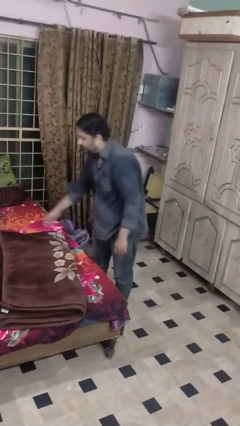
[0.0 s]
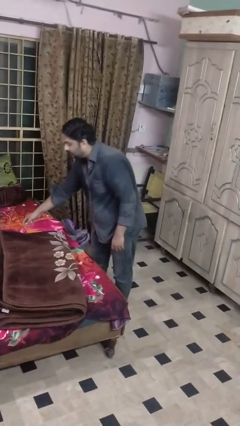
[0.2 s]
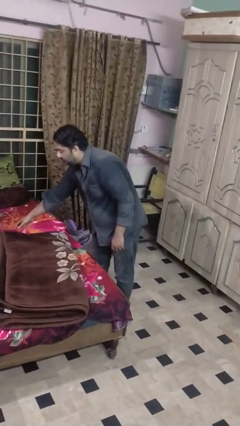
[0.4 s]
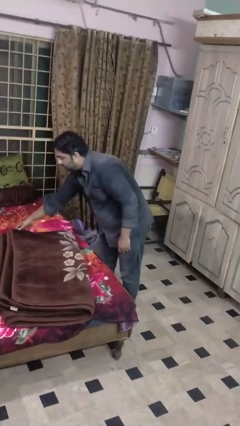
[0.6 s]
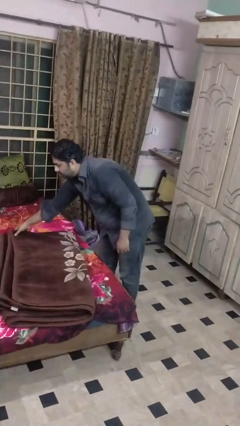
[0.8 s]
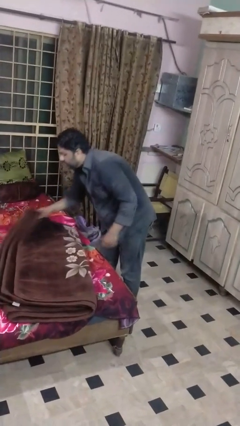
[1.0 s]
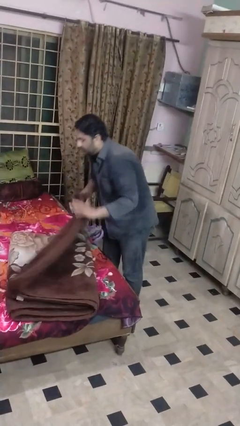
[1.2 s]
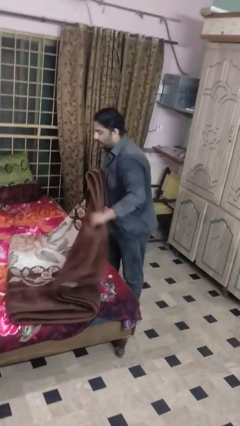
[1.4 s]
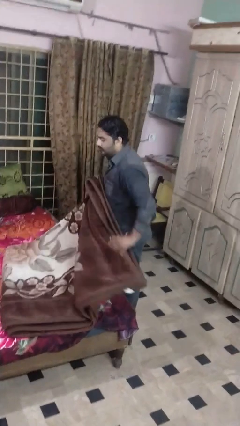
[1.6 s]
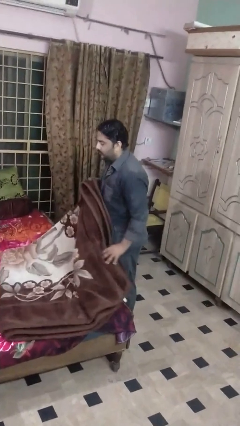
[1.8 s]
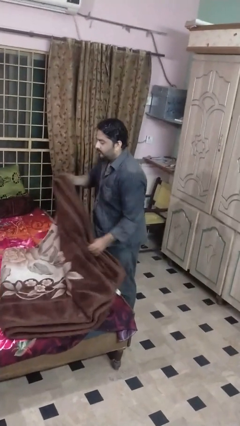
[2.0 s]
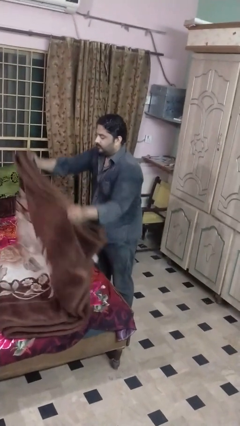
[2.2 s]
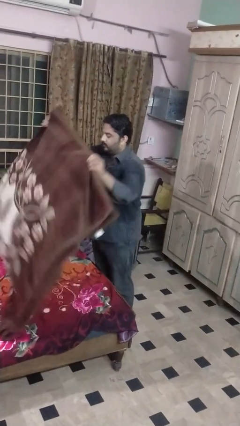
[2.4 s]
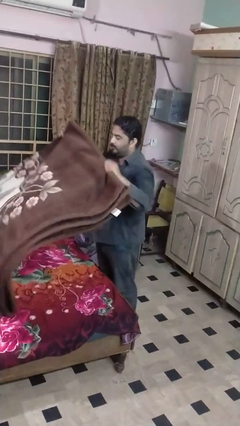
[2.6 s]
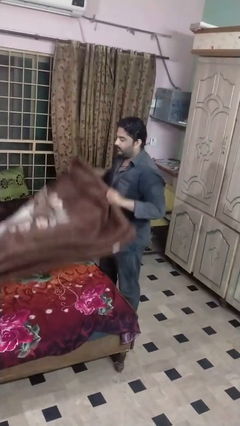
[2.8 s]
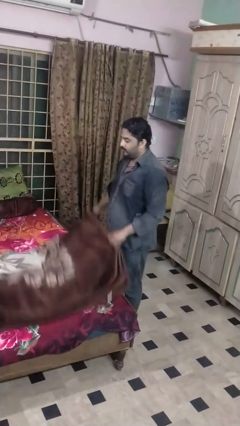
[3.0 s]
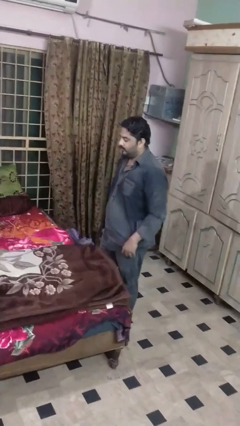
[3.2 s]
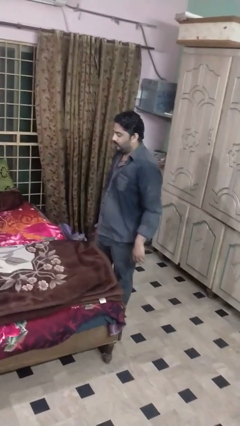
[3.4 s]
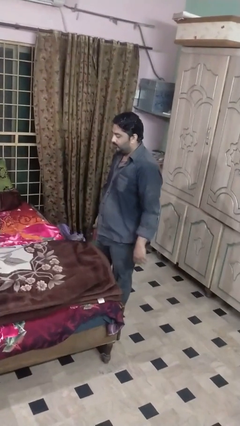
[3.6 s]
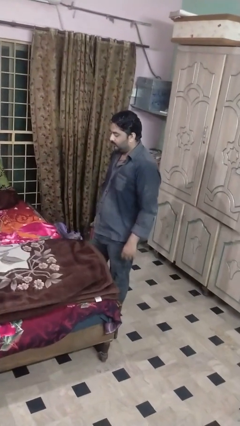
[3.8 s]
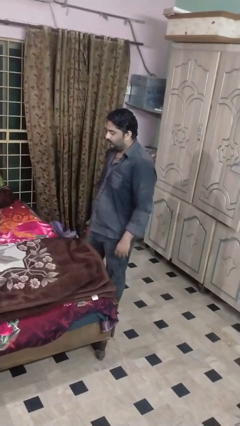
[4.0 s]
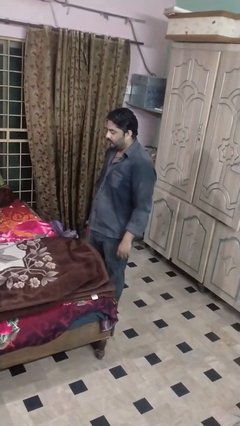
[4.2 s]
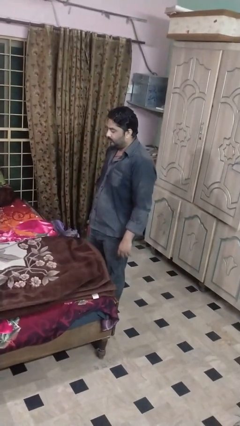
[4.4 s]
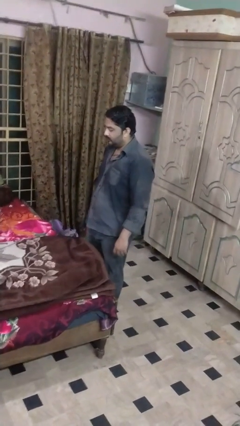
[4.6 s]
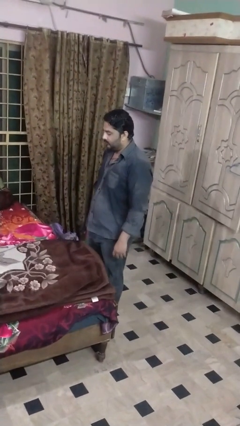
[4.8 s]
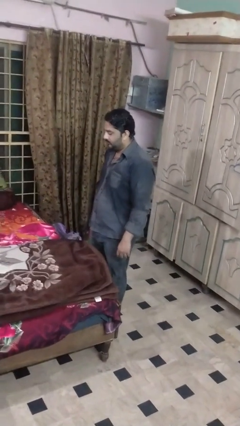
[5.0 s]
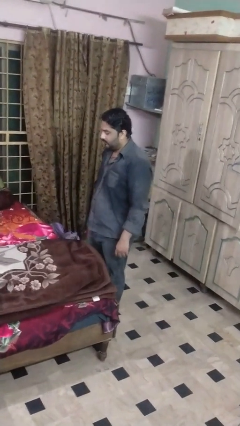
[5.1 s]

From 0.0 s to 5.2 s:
person unfolds blanket

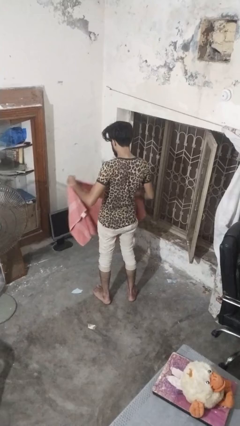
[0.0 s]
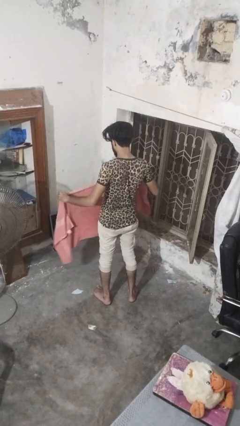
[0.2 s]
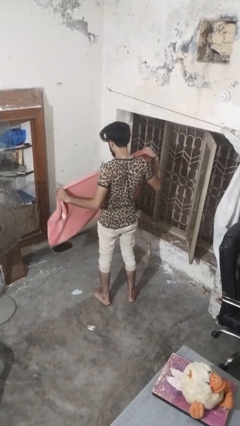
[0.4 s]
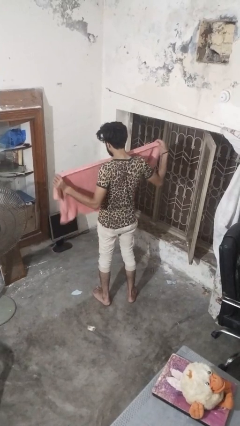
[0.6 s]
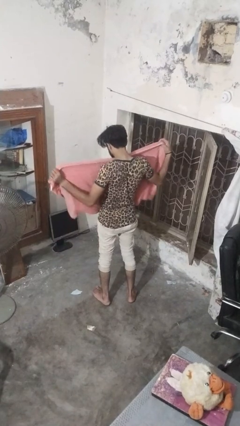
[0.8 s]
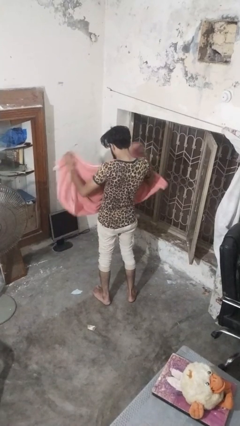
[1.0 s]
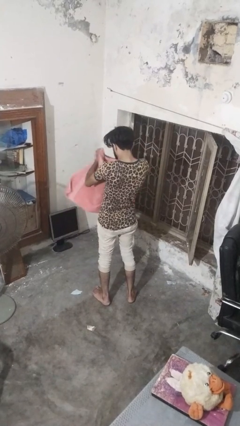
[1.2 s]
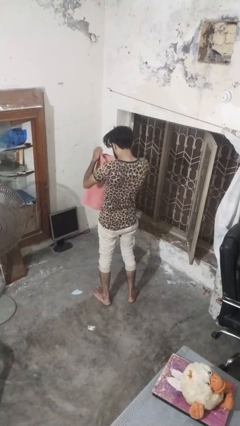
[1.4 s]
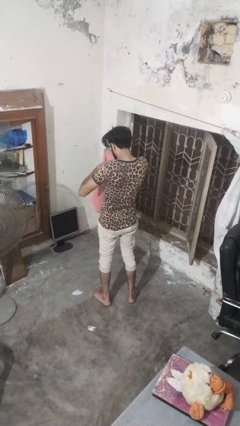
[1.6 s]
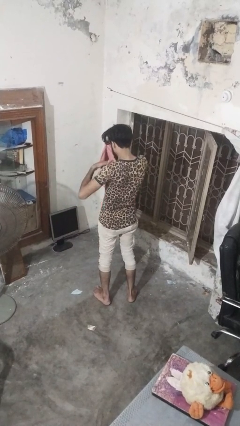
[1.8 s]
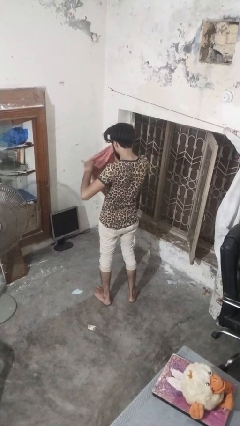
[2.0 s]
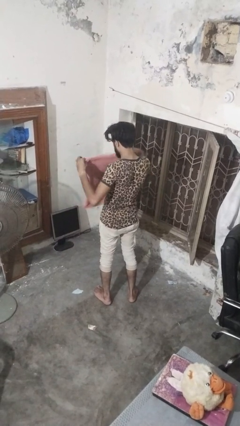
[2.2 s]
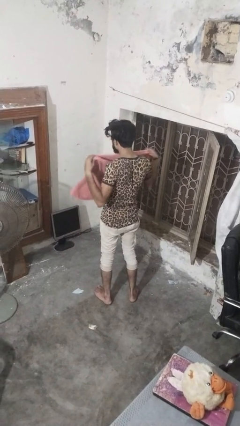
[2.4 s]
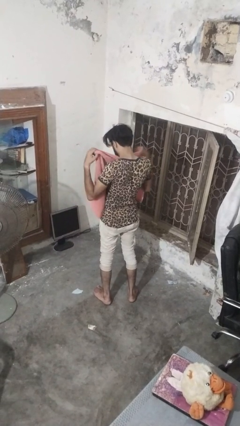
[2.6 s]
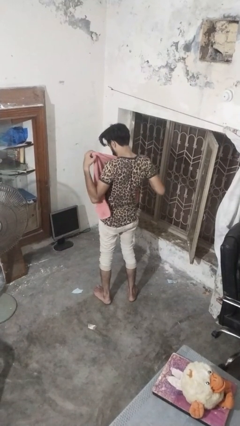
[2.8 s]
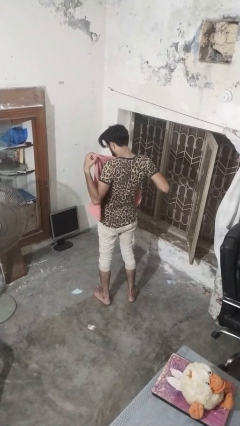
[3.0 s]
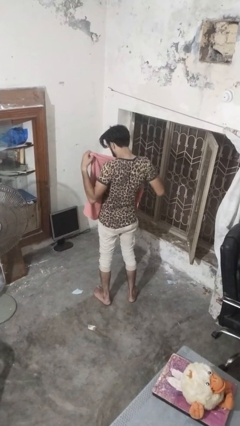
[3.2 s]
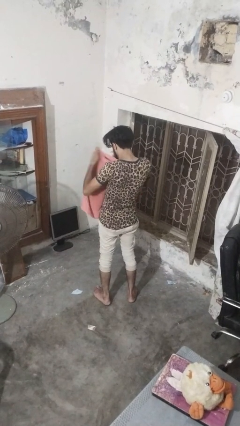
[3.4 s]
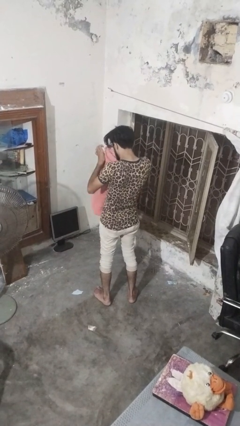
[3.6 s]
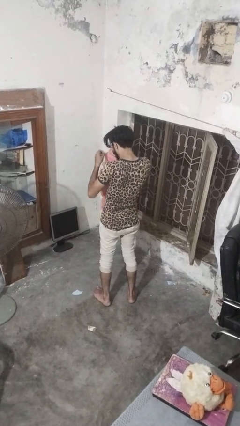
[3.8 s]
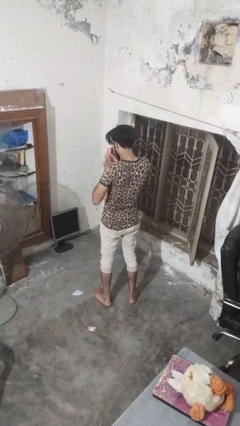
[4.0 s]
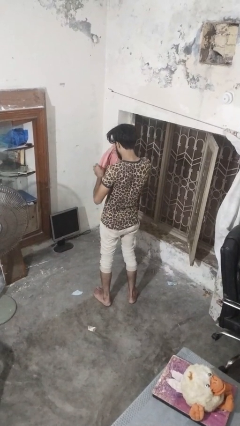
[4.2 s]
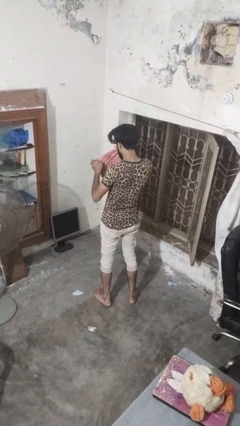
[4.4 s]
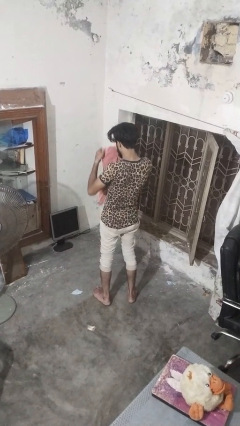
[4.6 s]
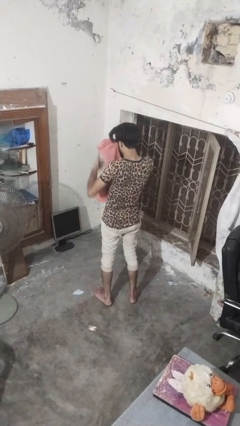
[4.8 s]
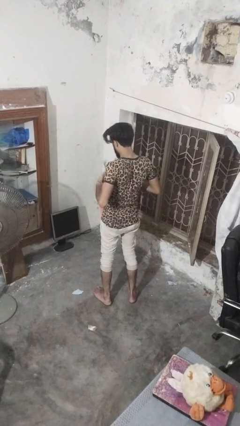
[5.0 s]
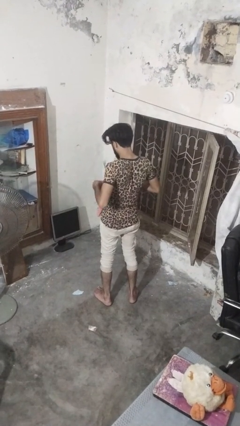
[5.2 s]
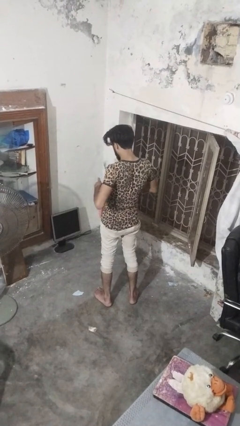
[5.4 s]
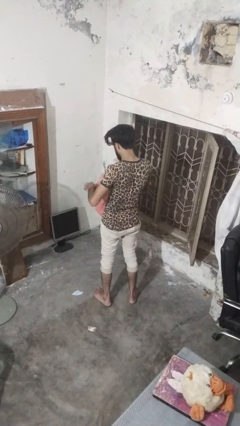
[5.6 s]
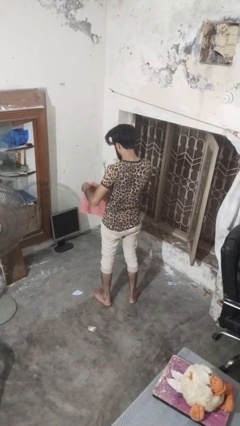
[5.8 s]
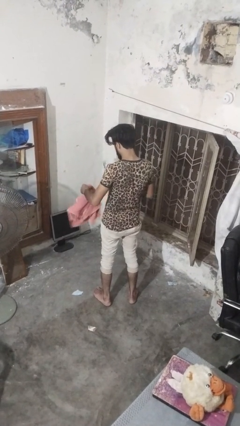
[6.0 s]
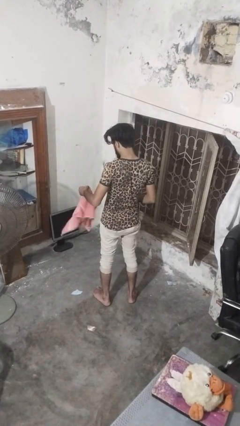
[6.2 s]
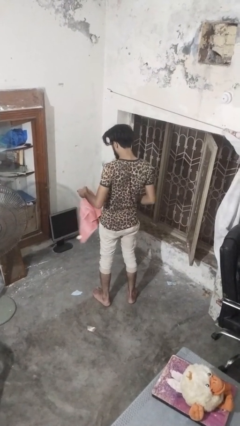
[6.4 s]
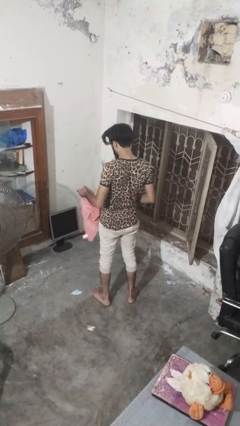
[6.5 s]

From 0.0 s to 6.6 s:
person folds towel

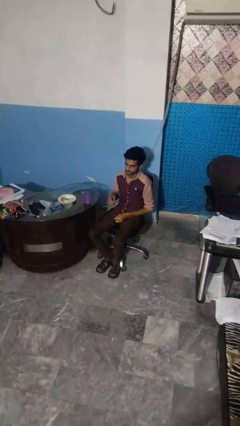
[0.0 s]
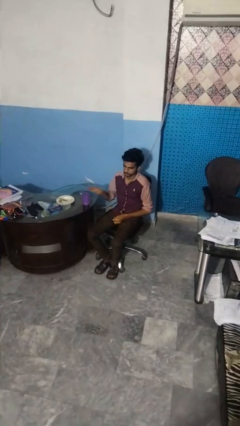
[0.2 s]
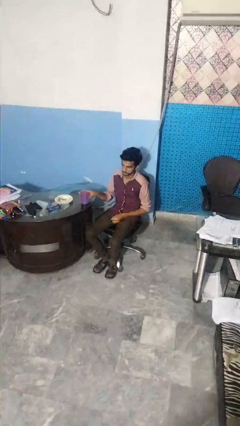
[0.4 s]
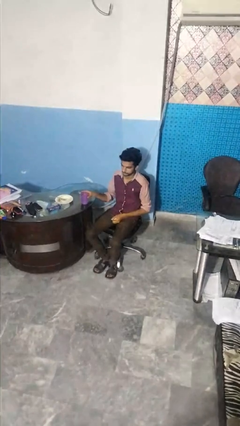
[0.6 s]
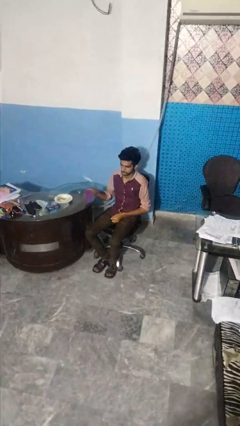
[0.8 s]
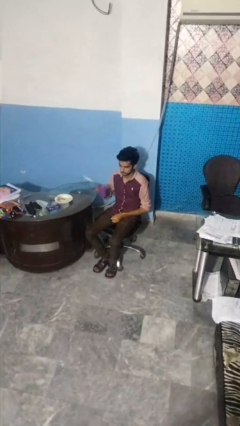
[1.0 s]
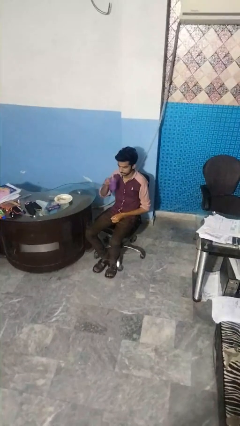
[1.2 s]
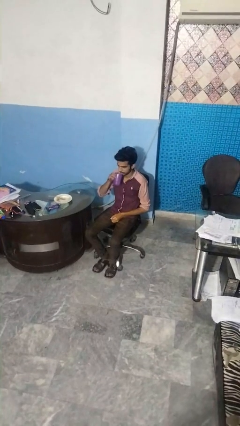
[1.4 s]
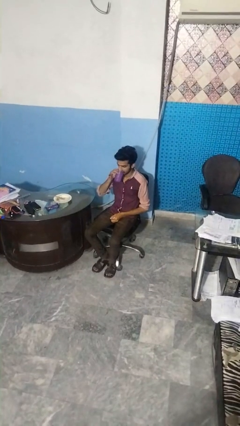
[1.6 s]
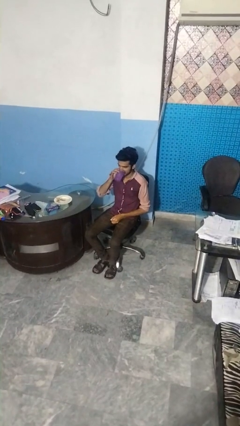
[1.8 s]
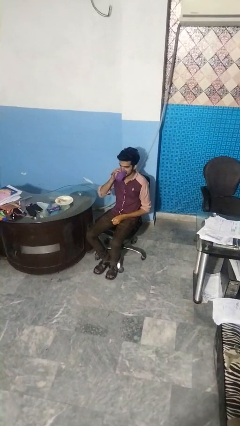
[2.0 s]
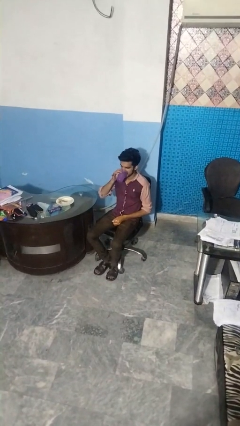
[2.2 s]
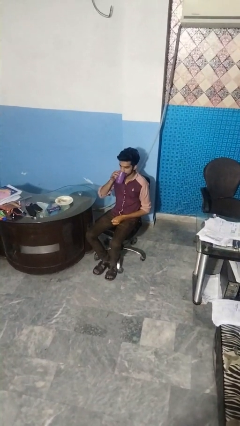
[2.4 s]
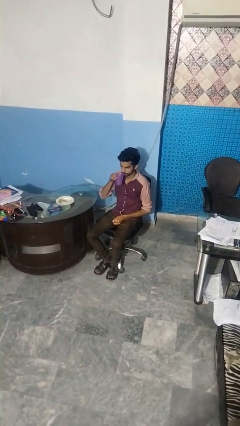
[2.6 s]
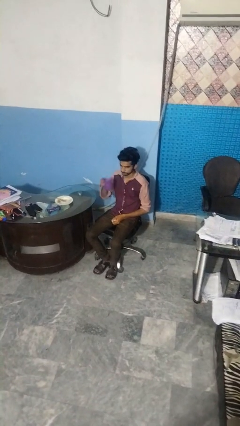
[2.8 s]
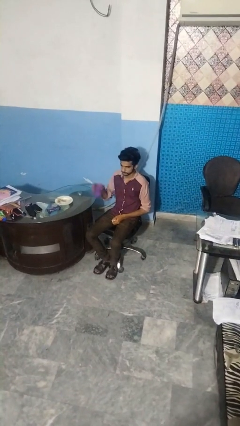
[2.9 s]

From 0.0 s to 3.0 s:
person drinks from cup

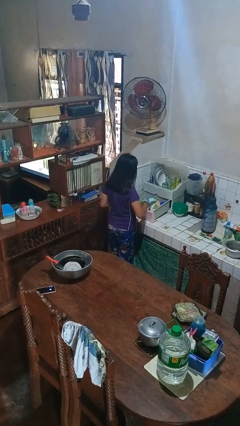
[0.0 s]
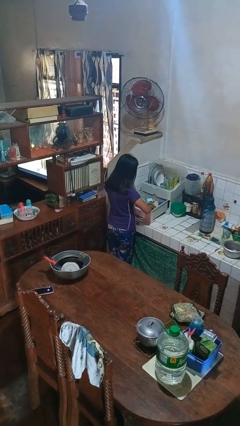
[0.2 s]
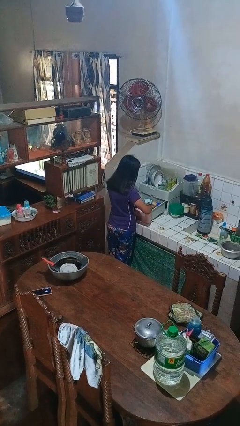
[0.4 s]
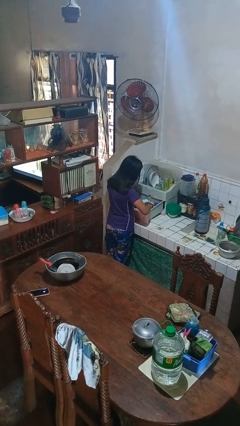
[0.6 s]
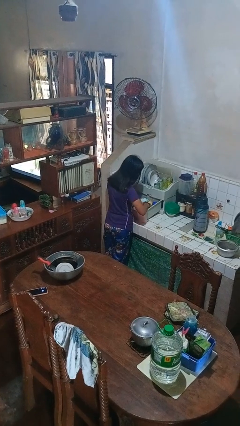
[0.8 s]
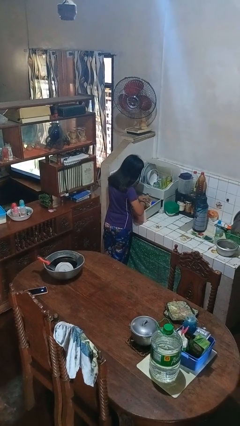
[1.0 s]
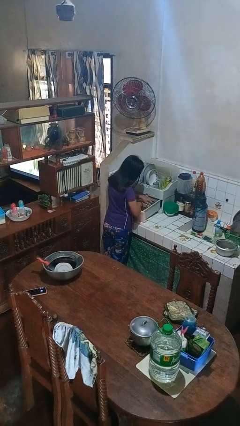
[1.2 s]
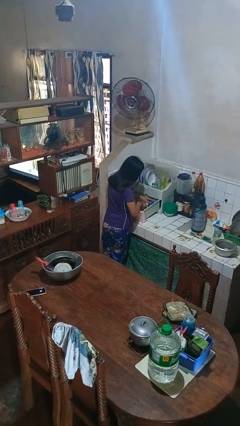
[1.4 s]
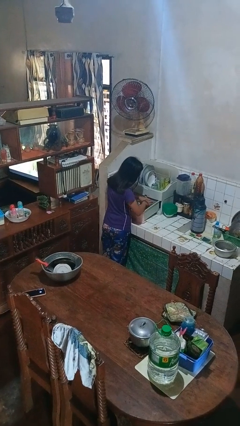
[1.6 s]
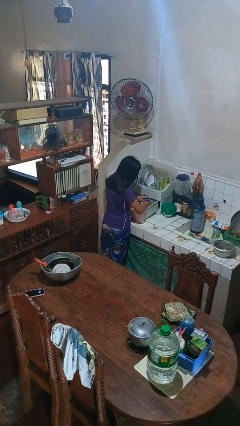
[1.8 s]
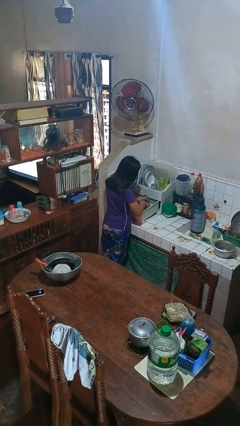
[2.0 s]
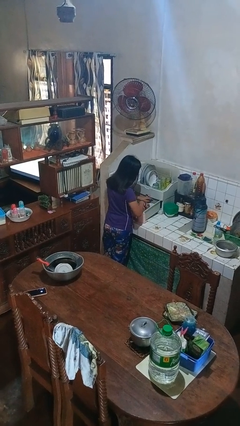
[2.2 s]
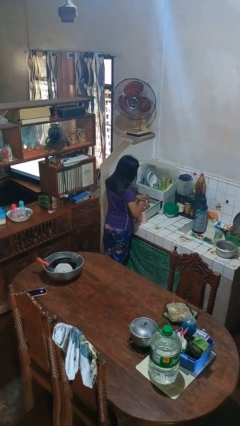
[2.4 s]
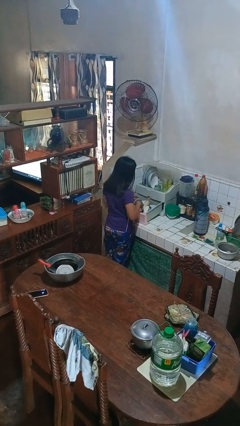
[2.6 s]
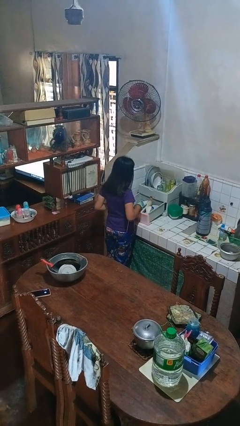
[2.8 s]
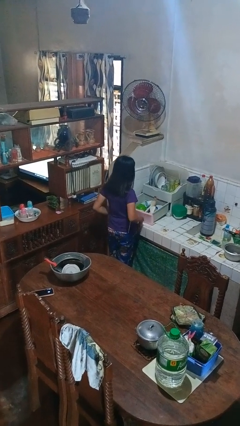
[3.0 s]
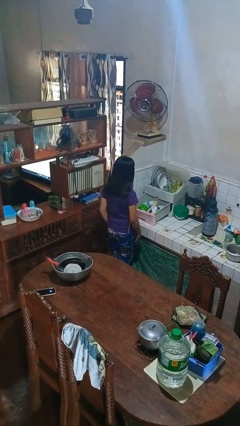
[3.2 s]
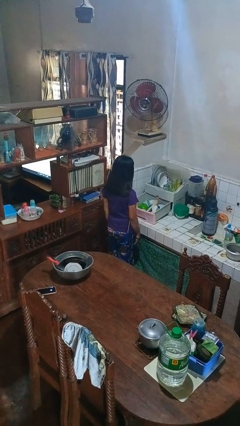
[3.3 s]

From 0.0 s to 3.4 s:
person searches in kitchen drawer
